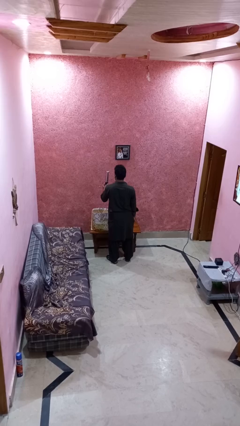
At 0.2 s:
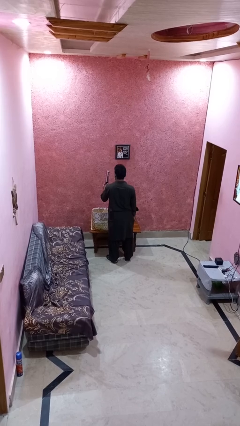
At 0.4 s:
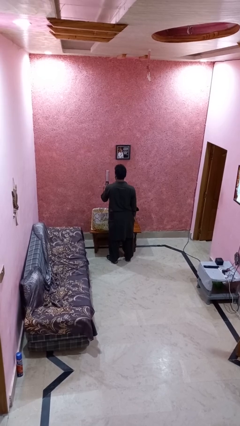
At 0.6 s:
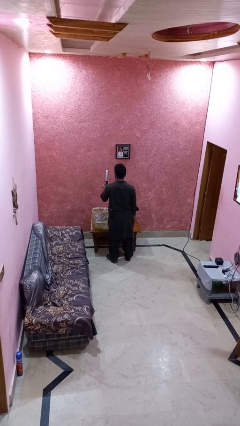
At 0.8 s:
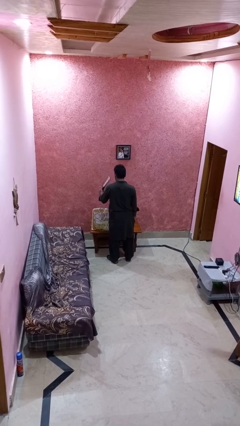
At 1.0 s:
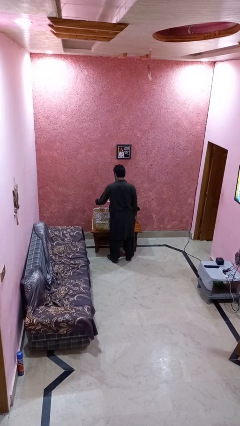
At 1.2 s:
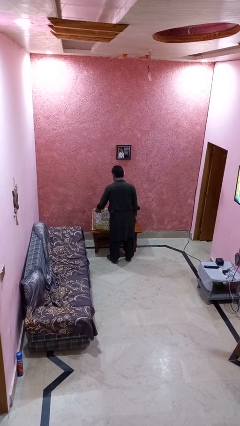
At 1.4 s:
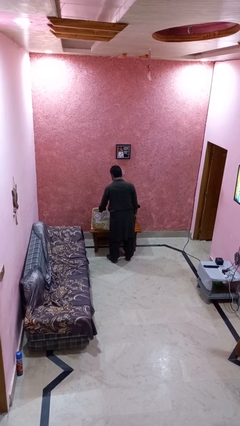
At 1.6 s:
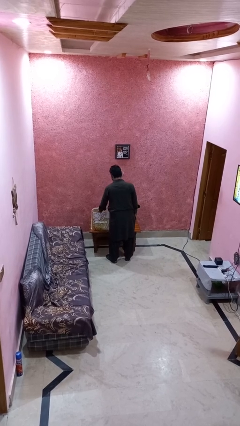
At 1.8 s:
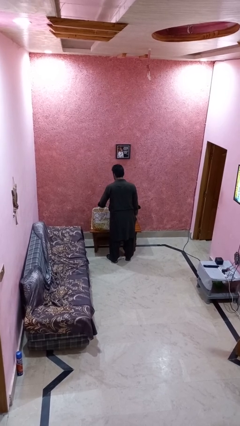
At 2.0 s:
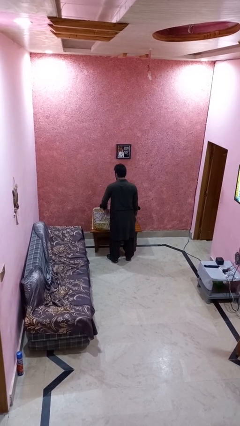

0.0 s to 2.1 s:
person puts object into bag

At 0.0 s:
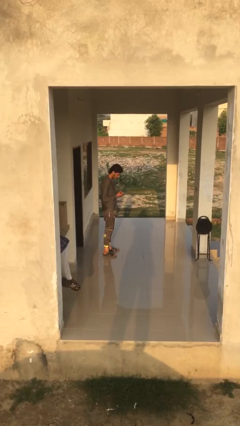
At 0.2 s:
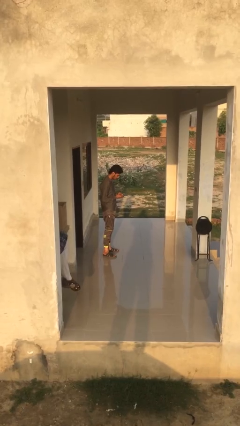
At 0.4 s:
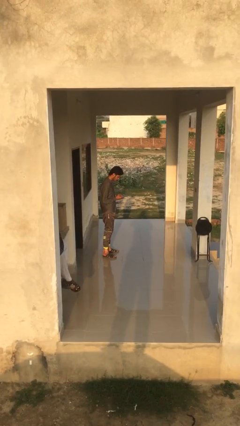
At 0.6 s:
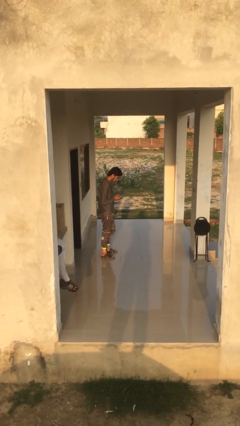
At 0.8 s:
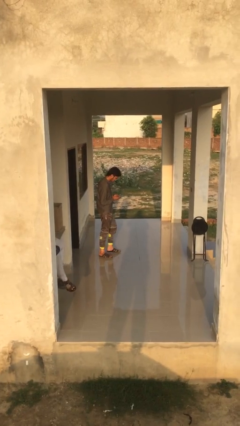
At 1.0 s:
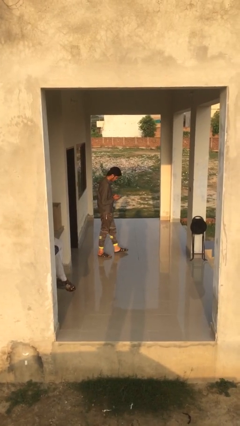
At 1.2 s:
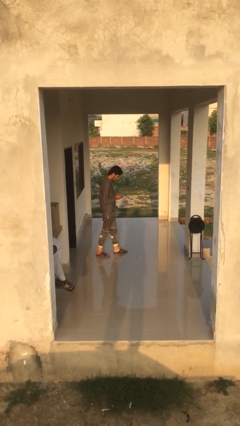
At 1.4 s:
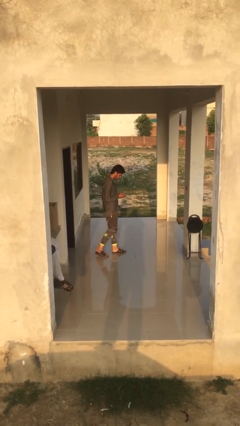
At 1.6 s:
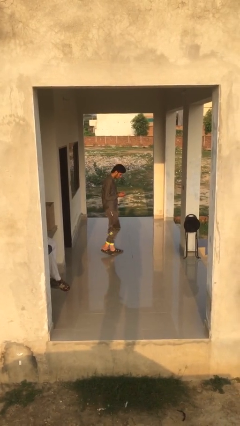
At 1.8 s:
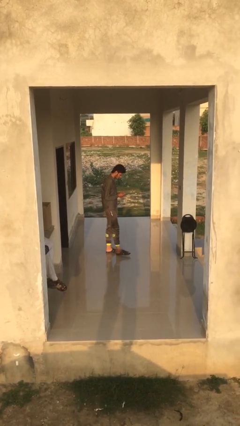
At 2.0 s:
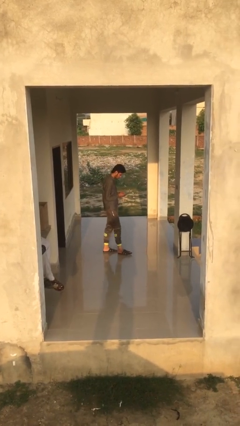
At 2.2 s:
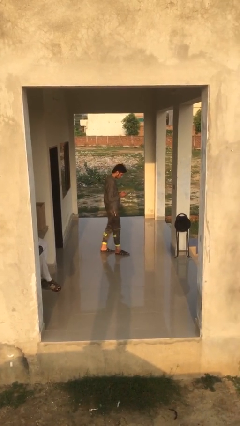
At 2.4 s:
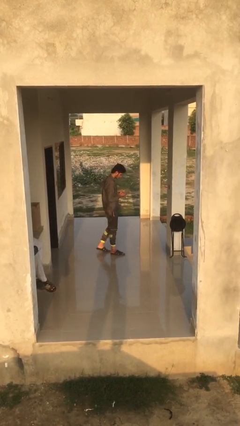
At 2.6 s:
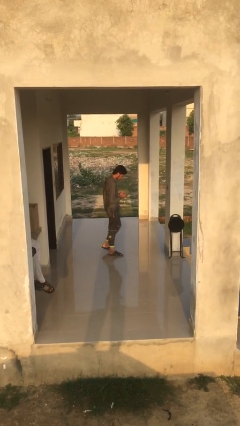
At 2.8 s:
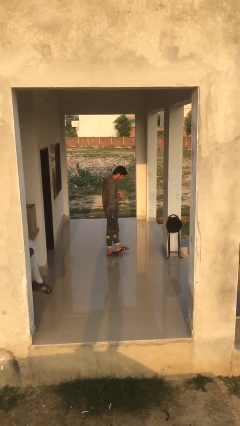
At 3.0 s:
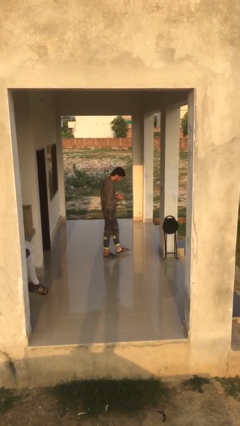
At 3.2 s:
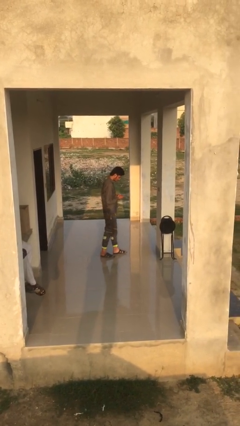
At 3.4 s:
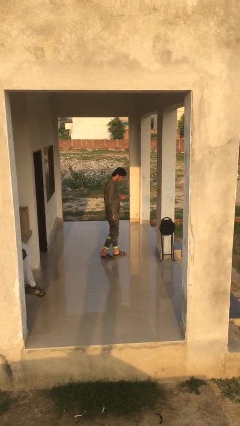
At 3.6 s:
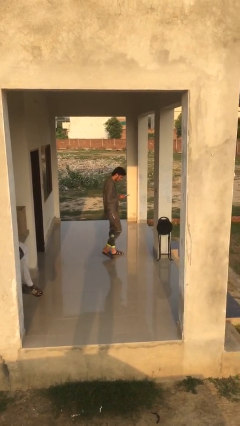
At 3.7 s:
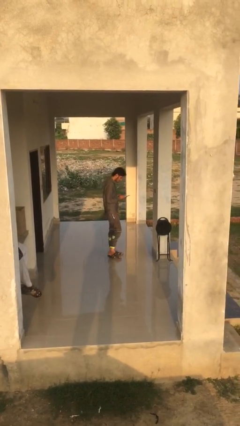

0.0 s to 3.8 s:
person texts on phone

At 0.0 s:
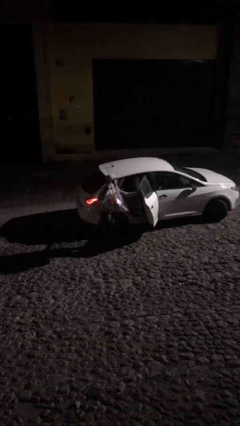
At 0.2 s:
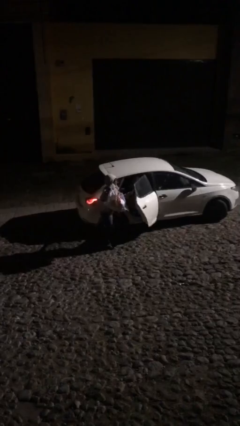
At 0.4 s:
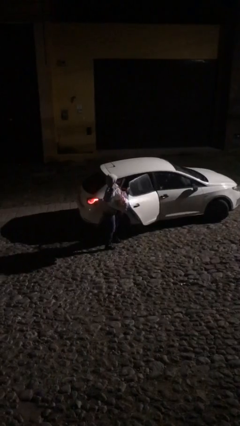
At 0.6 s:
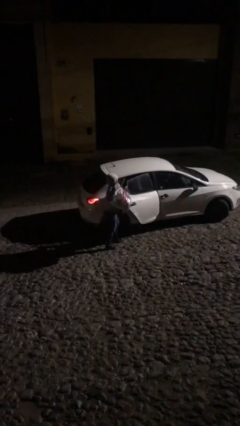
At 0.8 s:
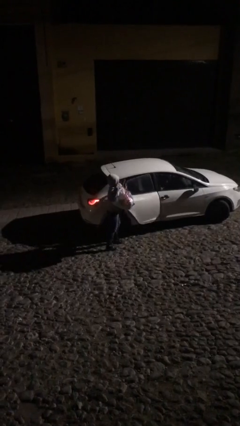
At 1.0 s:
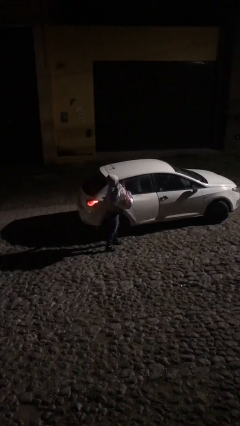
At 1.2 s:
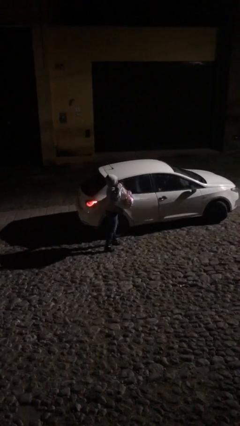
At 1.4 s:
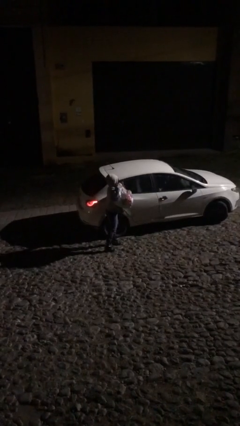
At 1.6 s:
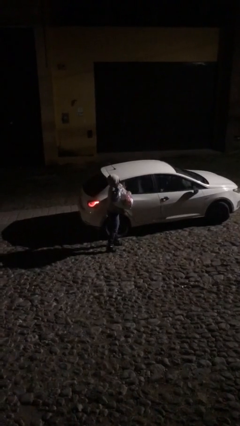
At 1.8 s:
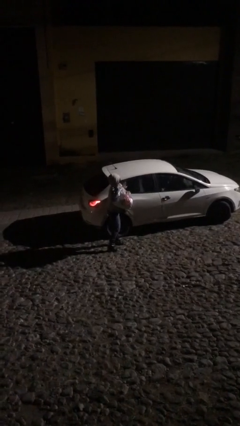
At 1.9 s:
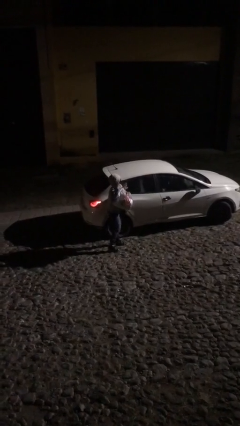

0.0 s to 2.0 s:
person closes car door

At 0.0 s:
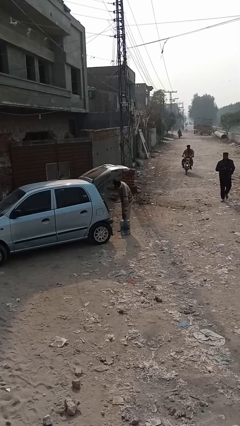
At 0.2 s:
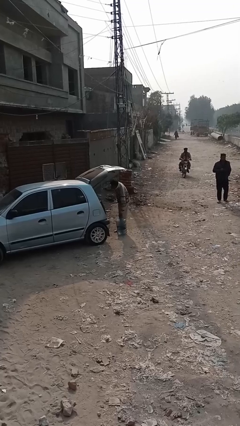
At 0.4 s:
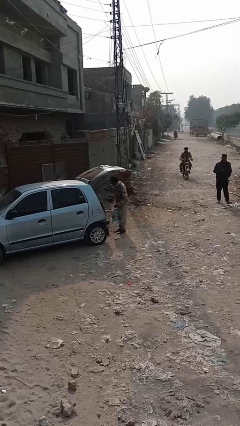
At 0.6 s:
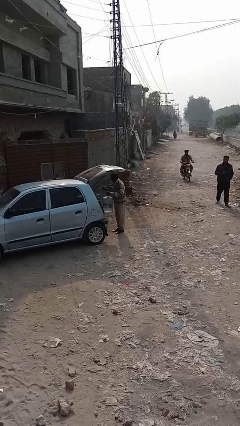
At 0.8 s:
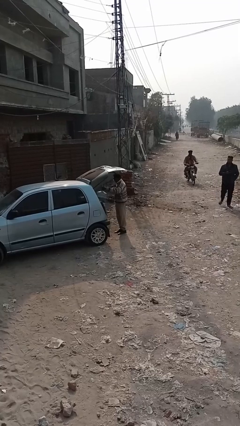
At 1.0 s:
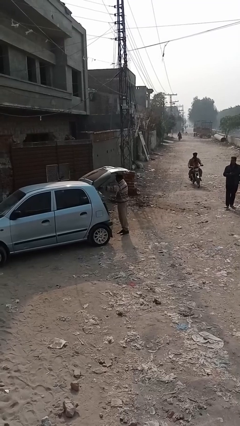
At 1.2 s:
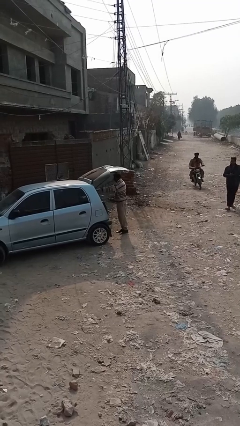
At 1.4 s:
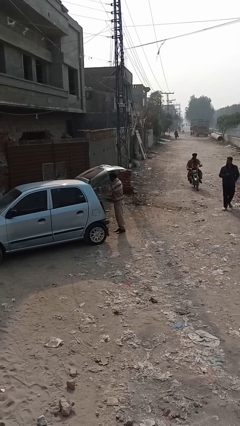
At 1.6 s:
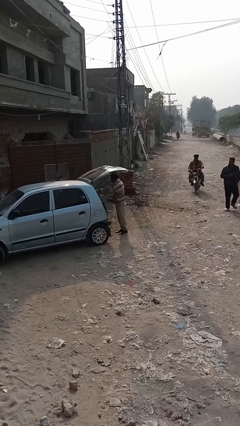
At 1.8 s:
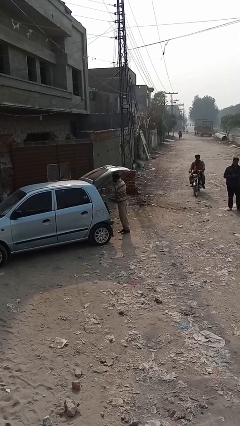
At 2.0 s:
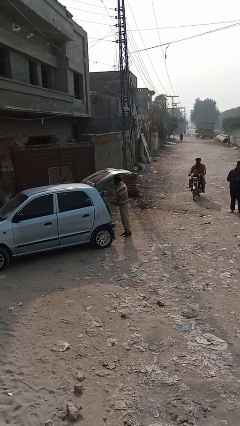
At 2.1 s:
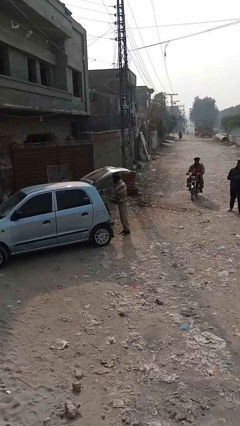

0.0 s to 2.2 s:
person loads car

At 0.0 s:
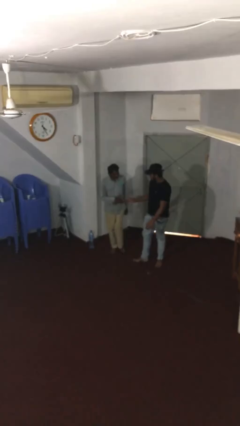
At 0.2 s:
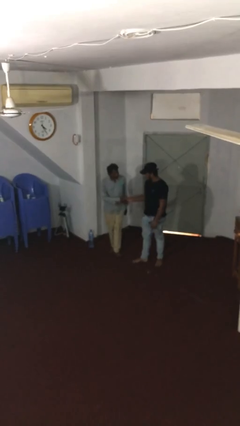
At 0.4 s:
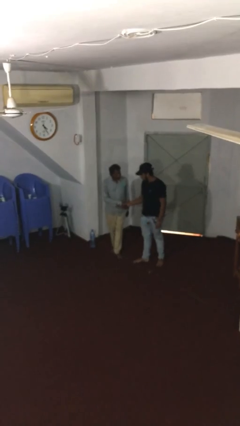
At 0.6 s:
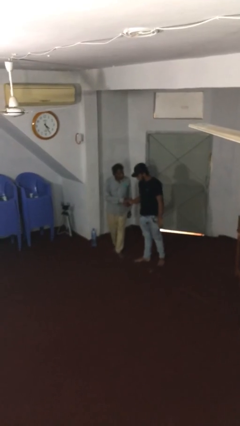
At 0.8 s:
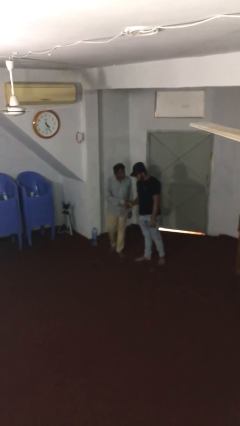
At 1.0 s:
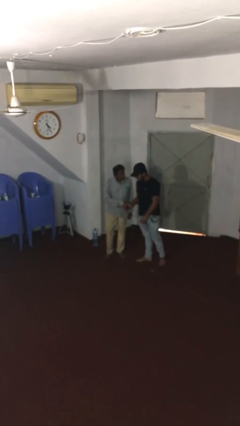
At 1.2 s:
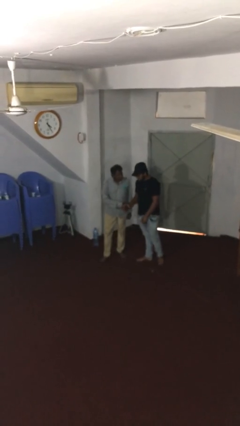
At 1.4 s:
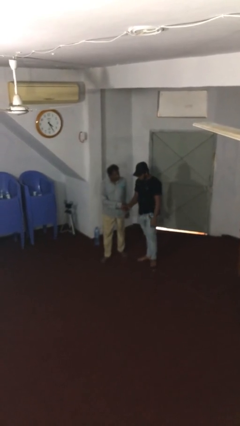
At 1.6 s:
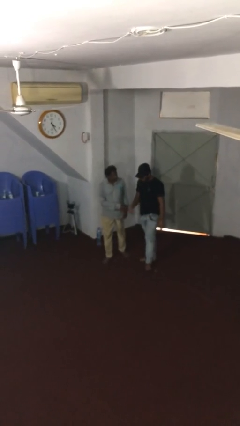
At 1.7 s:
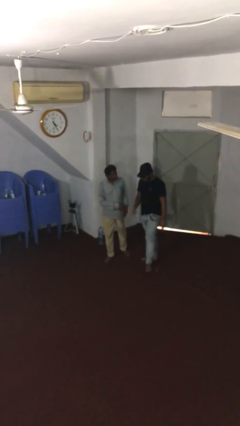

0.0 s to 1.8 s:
person shakes hand

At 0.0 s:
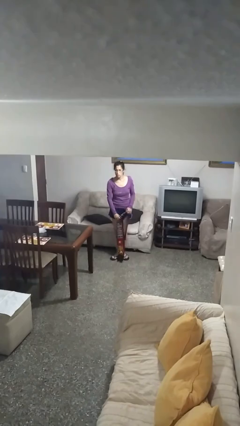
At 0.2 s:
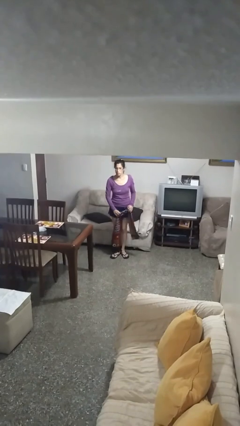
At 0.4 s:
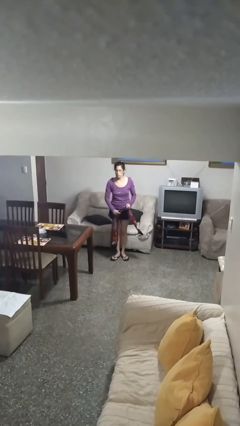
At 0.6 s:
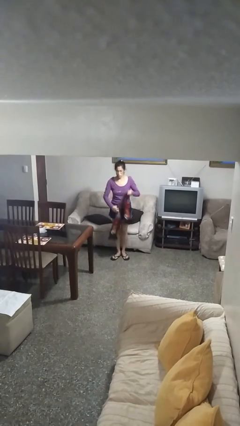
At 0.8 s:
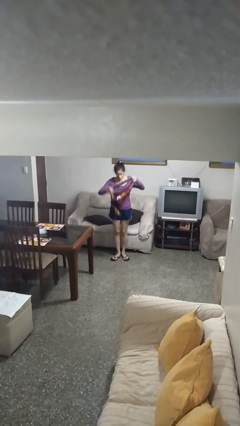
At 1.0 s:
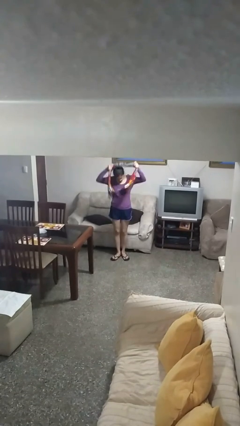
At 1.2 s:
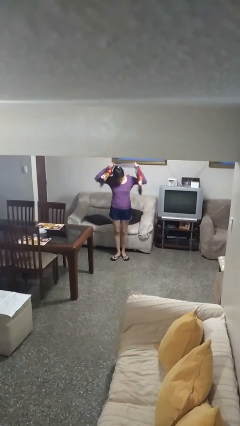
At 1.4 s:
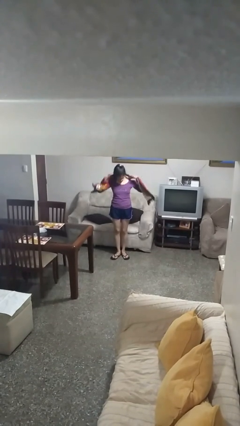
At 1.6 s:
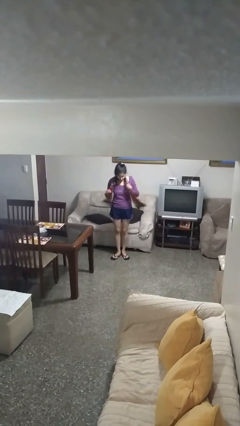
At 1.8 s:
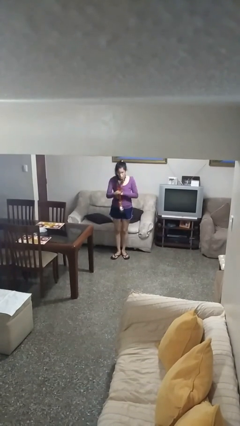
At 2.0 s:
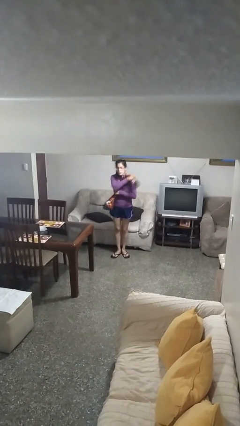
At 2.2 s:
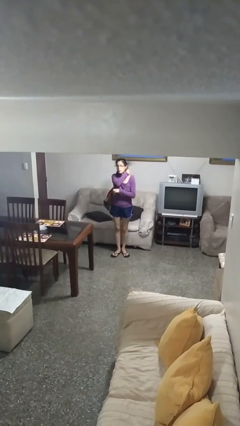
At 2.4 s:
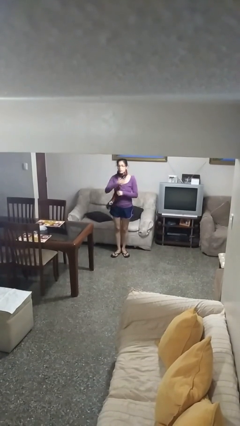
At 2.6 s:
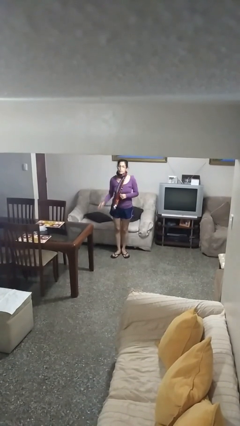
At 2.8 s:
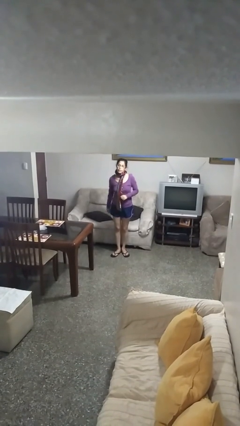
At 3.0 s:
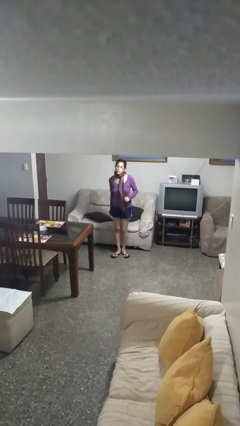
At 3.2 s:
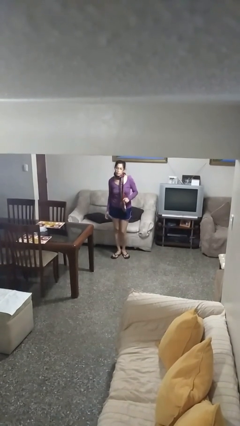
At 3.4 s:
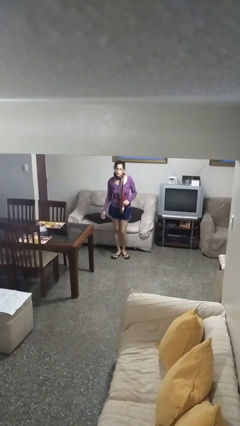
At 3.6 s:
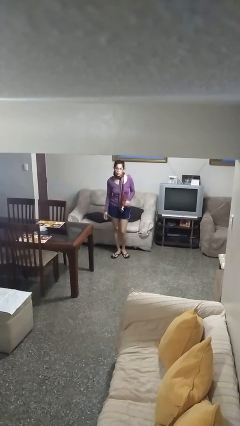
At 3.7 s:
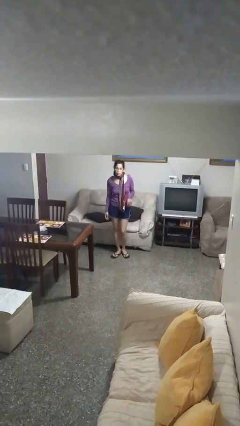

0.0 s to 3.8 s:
person puts on scarf

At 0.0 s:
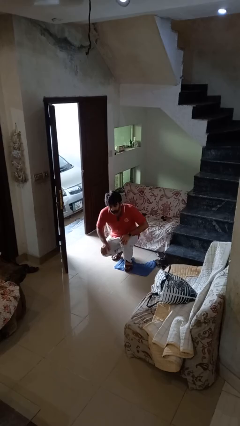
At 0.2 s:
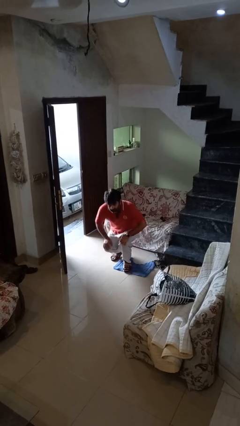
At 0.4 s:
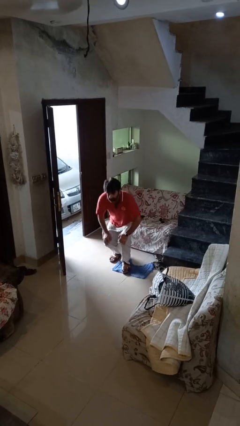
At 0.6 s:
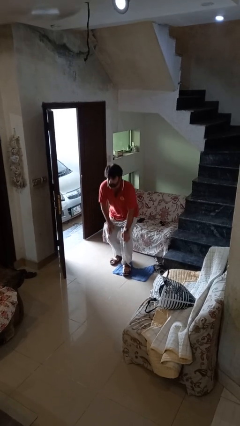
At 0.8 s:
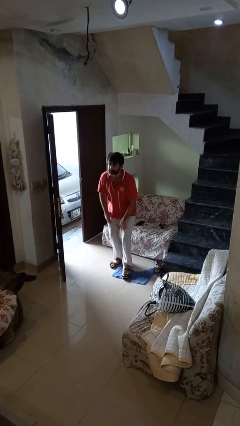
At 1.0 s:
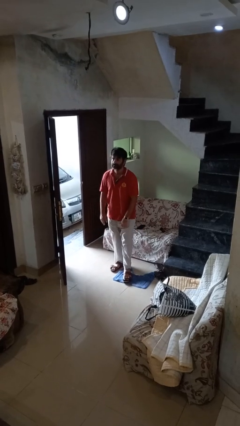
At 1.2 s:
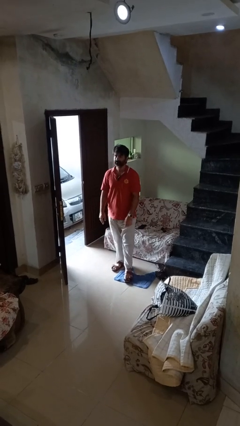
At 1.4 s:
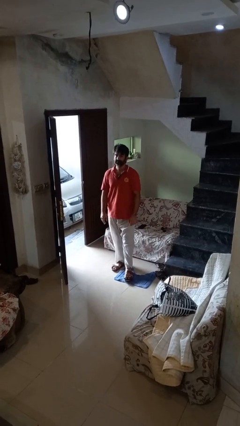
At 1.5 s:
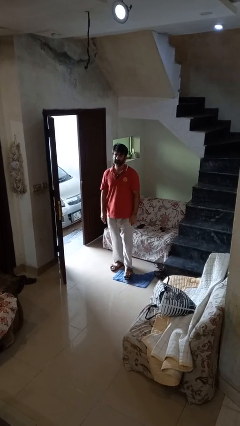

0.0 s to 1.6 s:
person stands up
